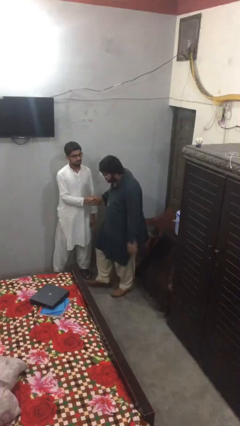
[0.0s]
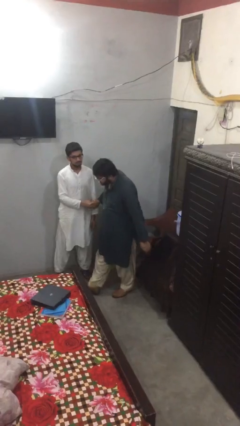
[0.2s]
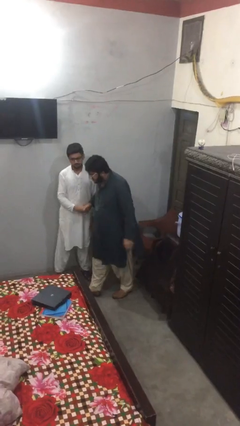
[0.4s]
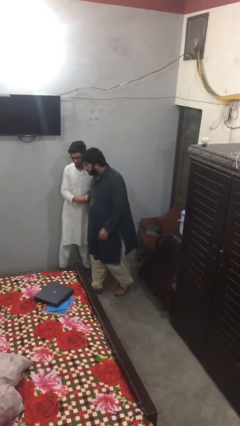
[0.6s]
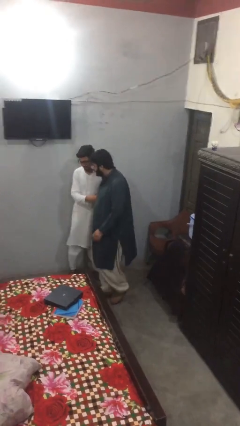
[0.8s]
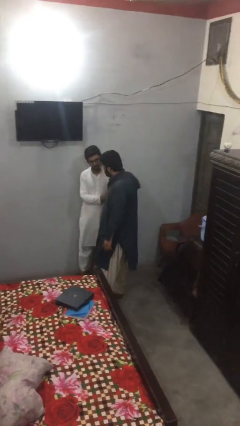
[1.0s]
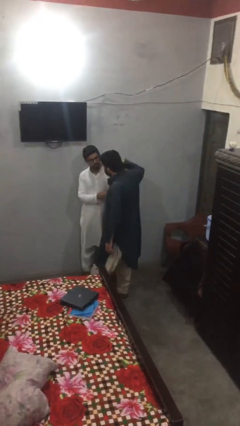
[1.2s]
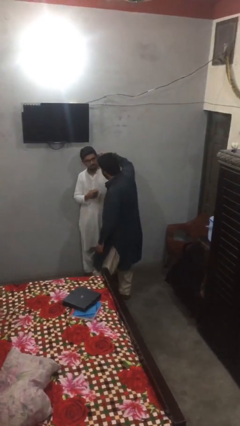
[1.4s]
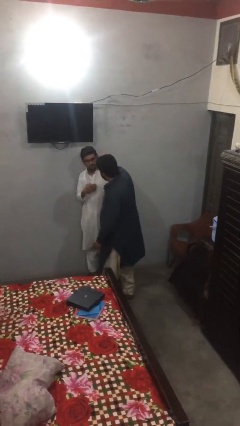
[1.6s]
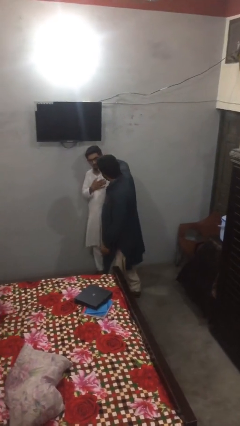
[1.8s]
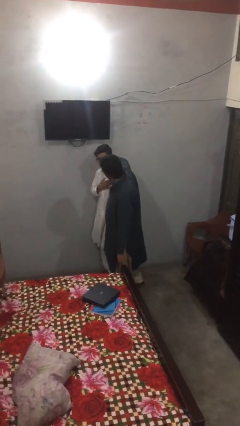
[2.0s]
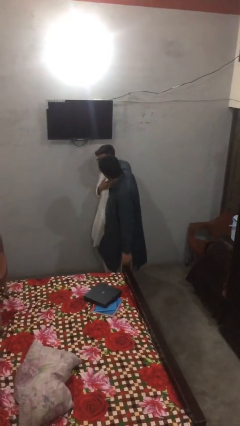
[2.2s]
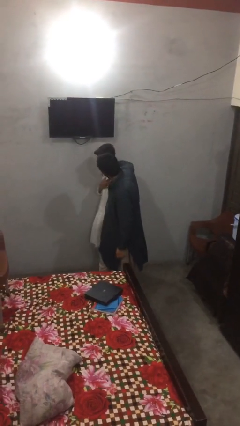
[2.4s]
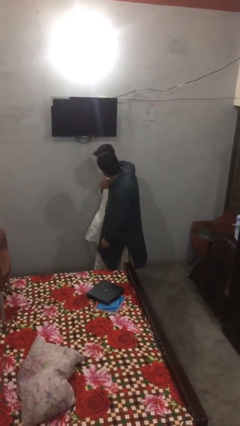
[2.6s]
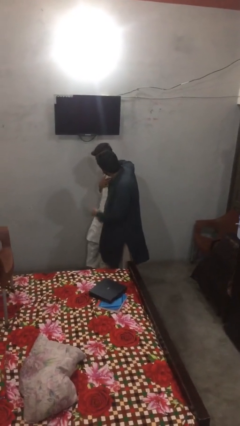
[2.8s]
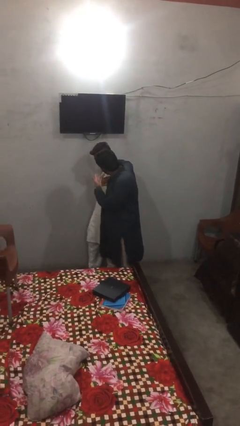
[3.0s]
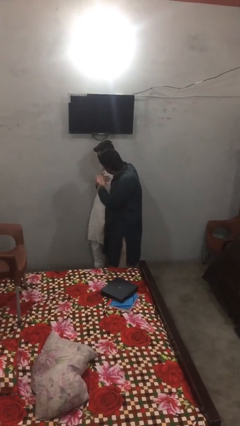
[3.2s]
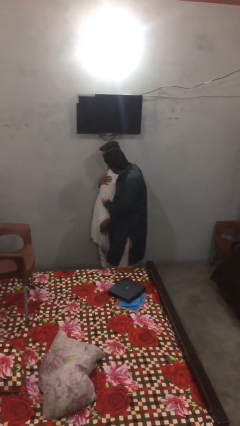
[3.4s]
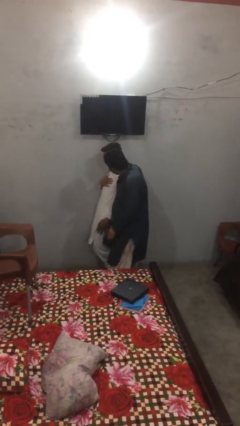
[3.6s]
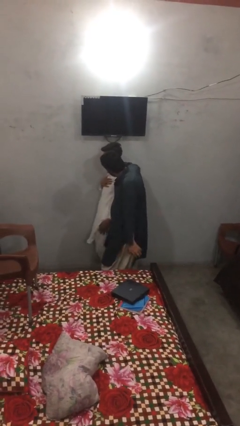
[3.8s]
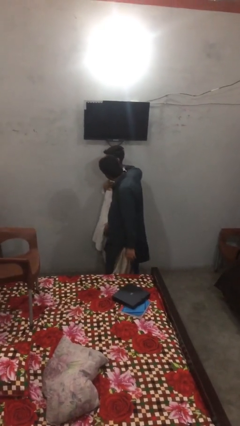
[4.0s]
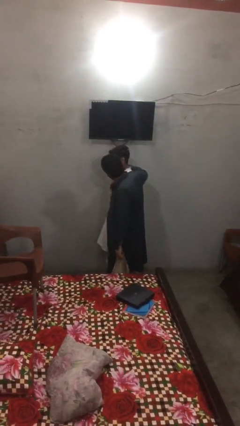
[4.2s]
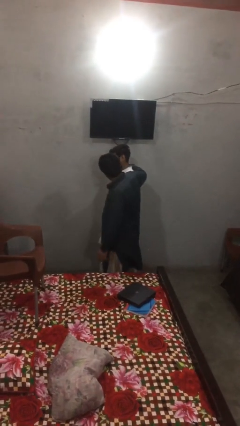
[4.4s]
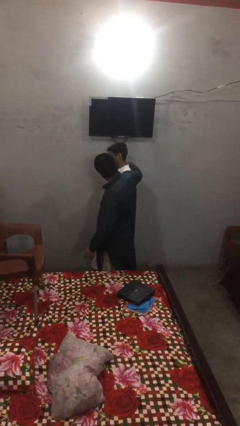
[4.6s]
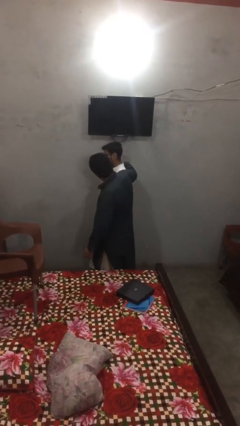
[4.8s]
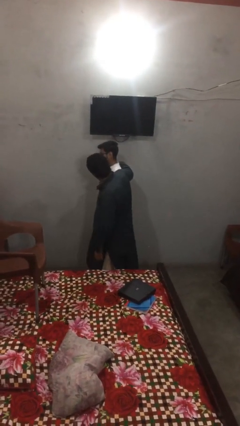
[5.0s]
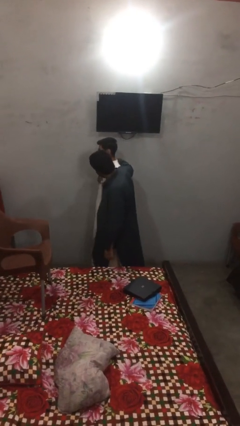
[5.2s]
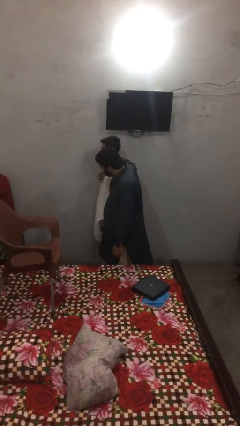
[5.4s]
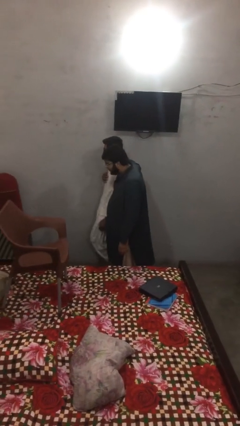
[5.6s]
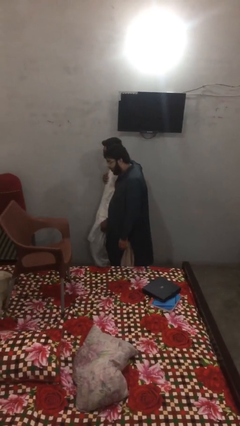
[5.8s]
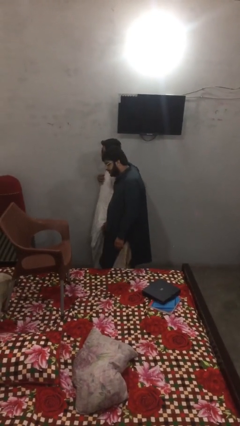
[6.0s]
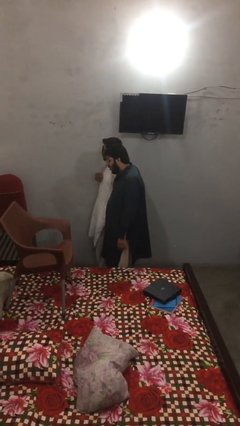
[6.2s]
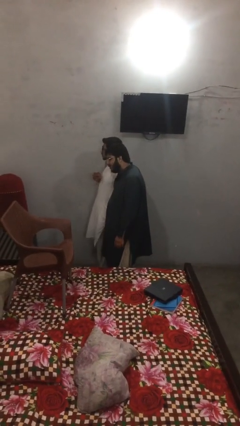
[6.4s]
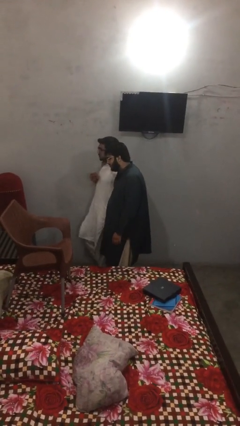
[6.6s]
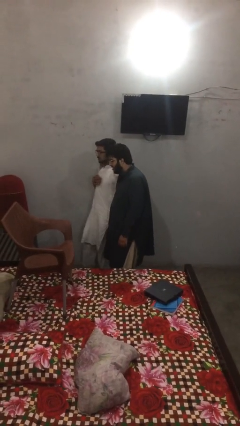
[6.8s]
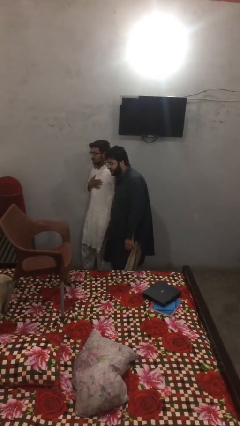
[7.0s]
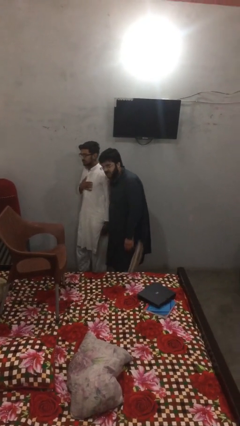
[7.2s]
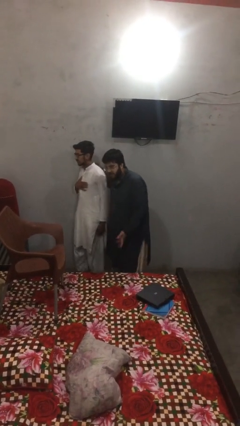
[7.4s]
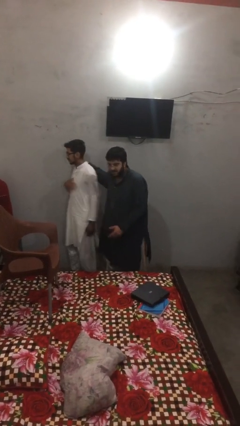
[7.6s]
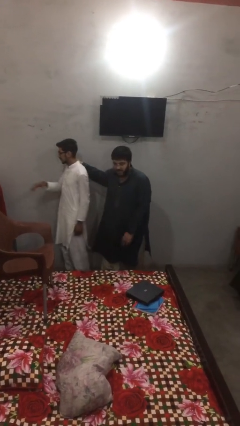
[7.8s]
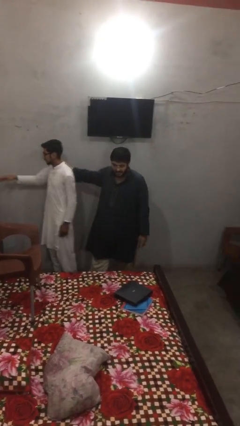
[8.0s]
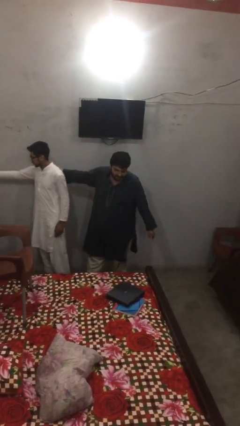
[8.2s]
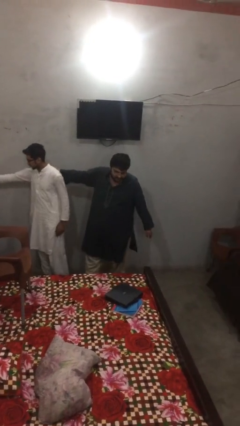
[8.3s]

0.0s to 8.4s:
person talks to person

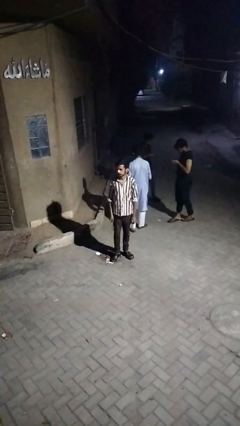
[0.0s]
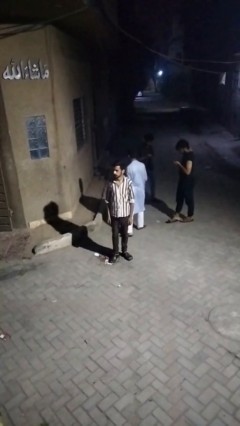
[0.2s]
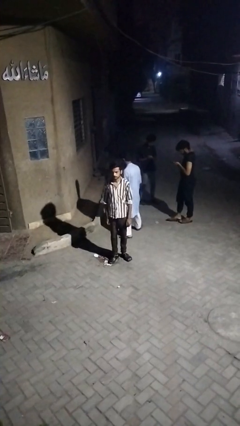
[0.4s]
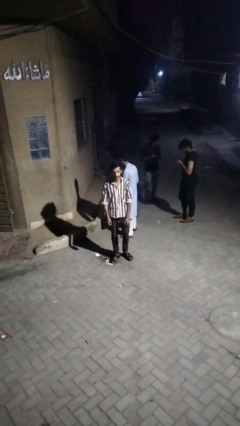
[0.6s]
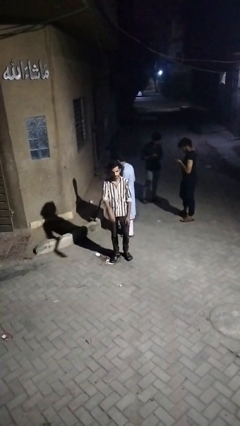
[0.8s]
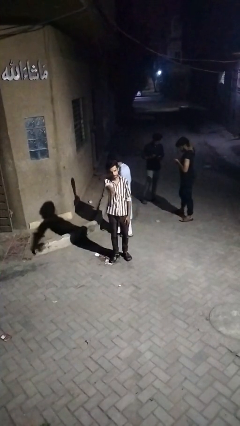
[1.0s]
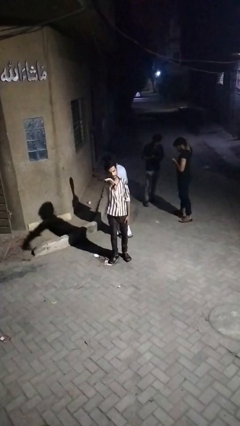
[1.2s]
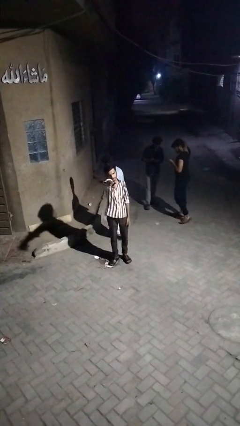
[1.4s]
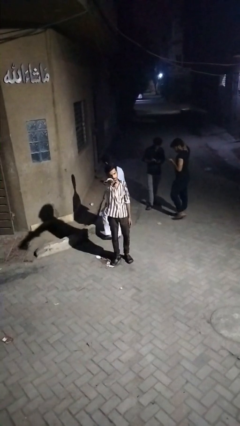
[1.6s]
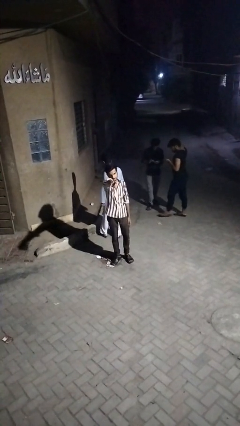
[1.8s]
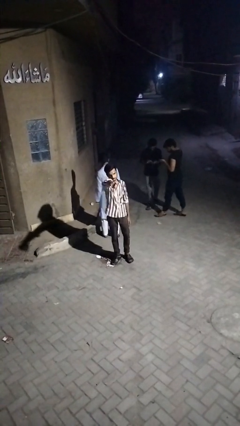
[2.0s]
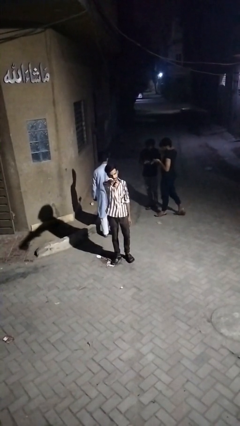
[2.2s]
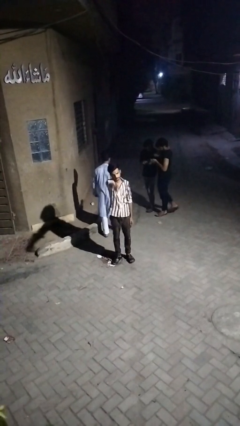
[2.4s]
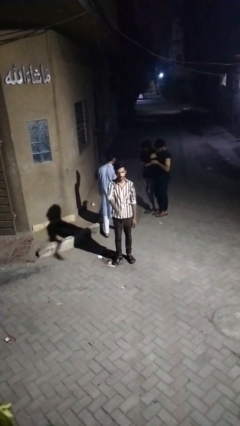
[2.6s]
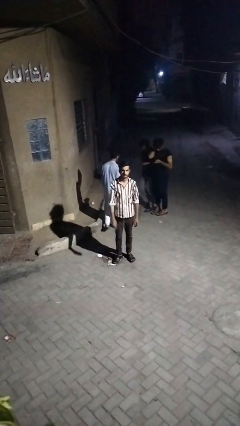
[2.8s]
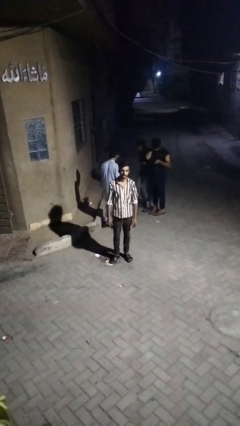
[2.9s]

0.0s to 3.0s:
person points at person

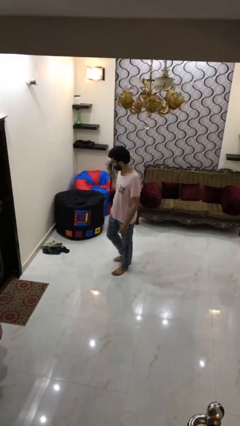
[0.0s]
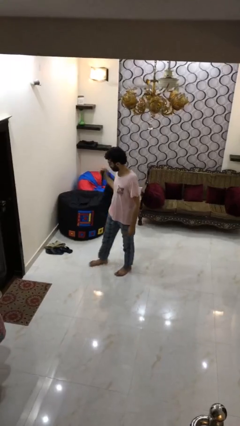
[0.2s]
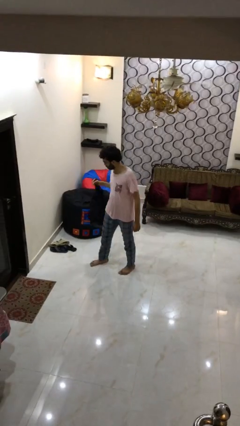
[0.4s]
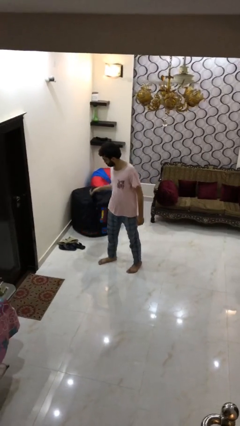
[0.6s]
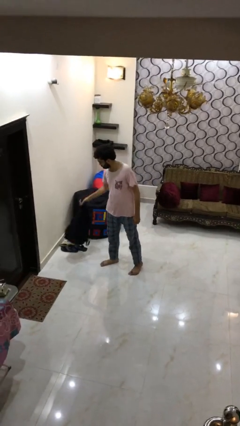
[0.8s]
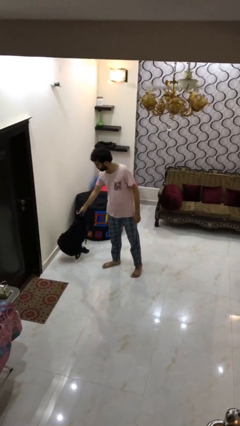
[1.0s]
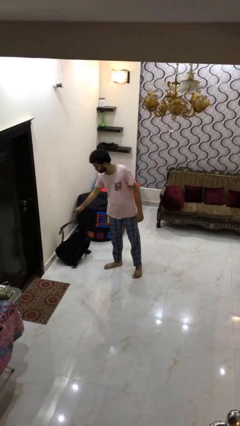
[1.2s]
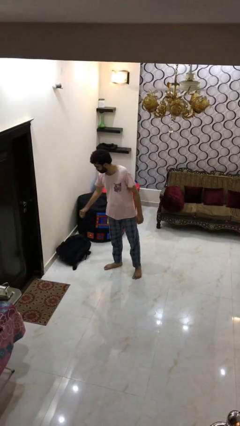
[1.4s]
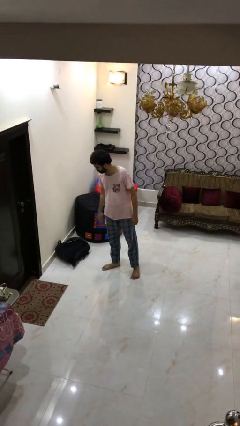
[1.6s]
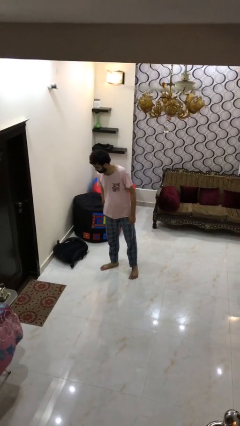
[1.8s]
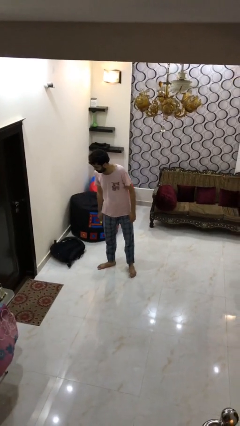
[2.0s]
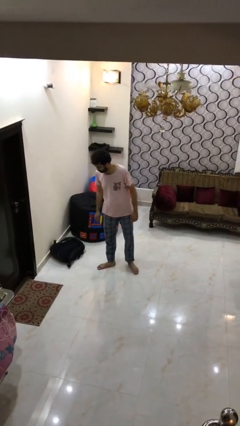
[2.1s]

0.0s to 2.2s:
person puts down object on floor

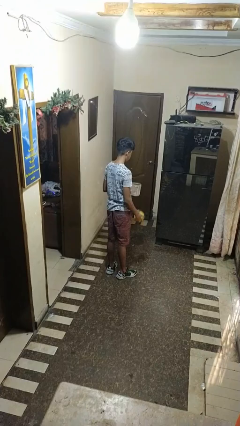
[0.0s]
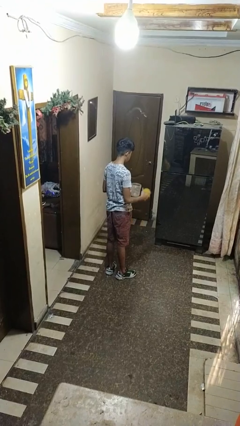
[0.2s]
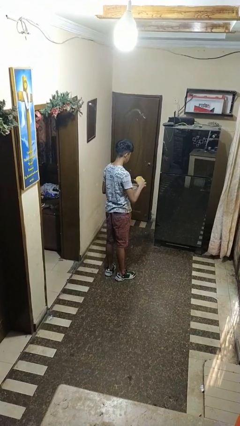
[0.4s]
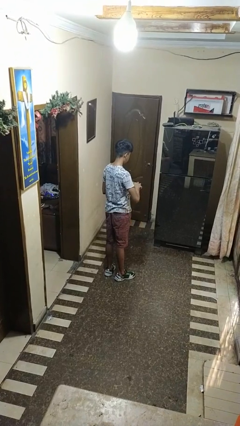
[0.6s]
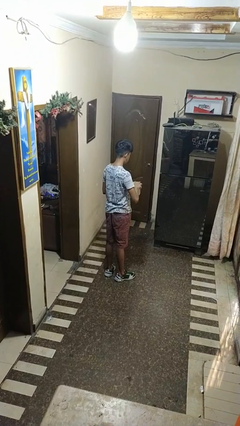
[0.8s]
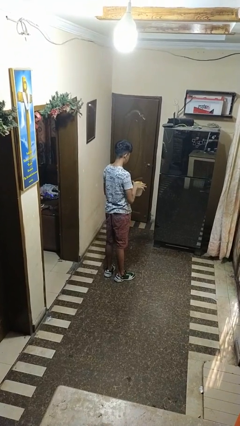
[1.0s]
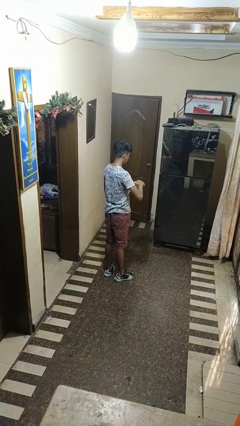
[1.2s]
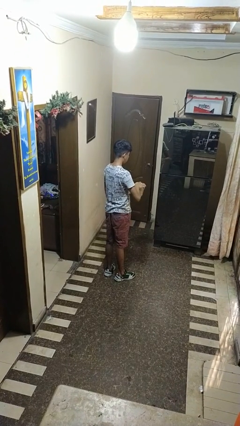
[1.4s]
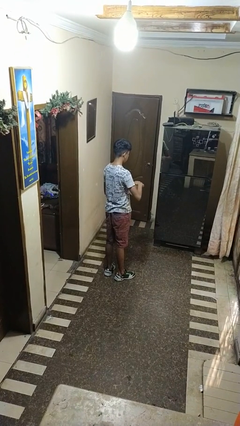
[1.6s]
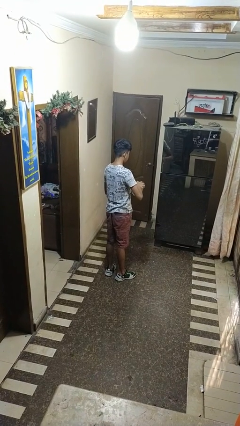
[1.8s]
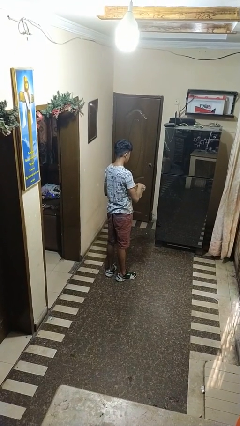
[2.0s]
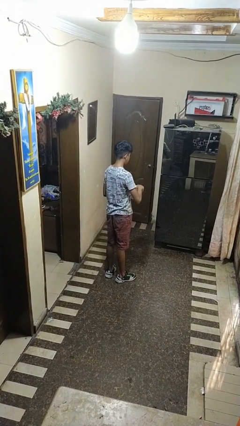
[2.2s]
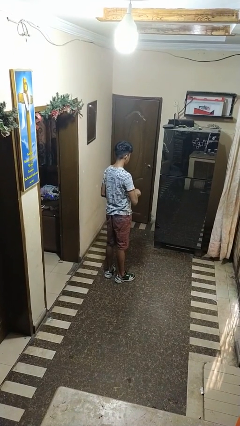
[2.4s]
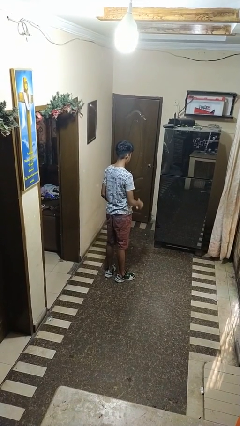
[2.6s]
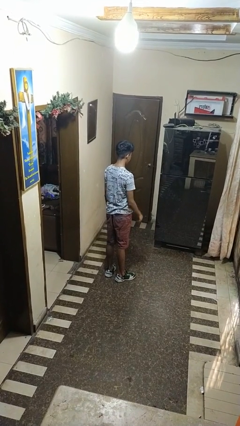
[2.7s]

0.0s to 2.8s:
person closes jar

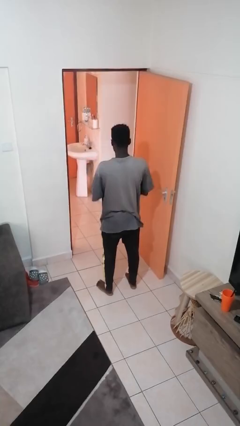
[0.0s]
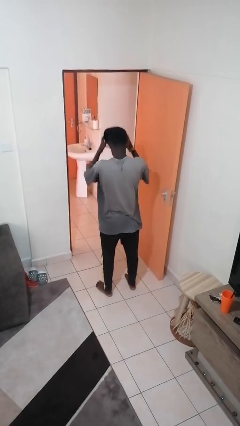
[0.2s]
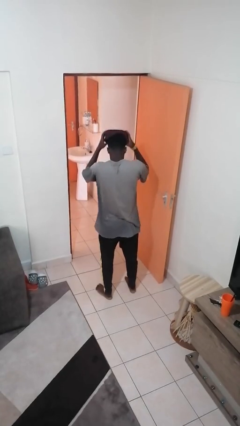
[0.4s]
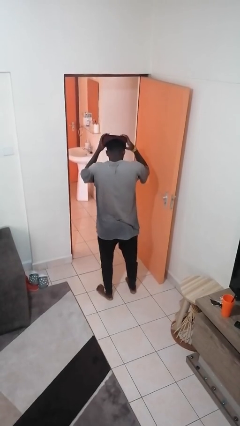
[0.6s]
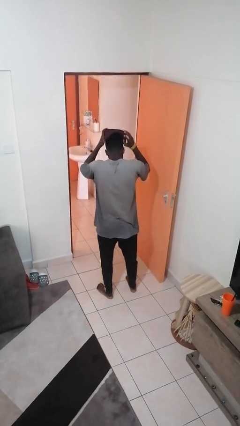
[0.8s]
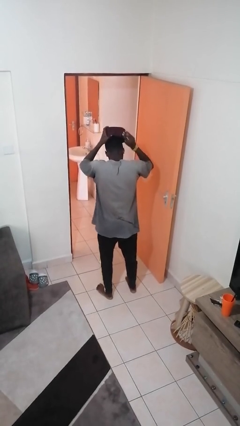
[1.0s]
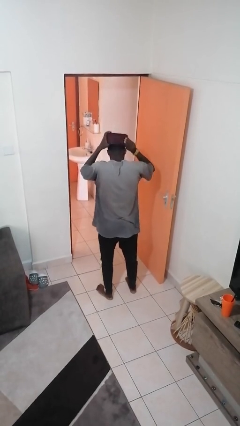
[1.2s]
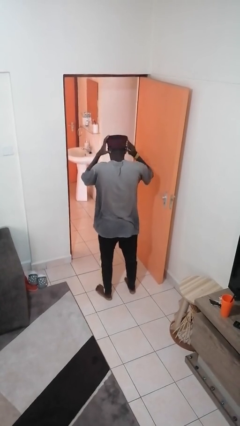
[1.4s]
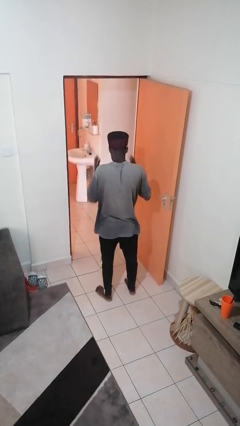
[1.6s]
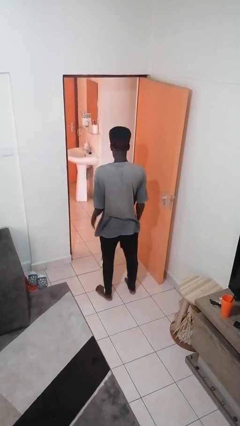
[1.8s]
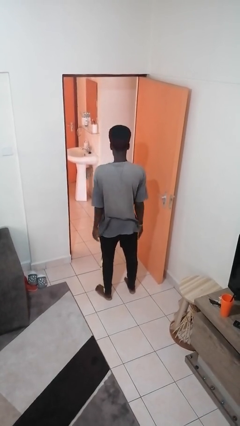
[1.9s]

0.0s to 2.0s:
person puts on hat
